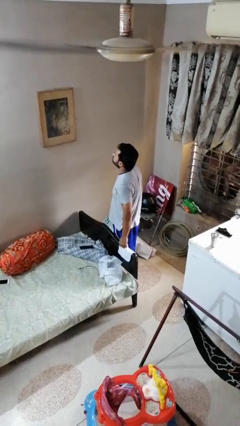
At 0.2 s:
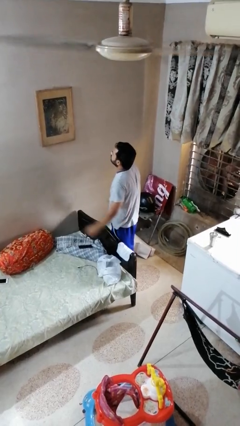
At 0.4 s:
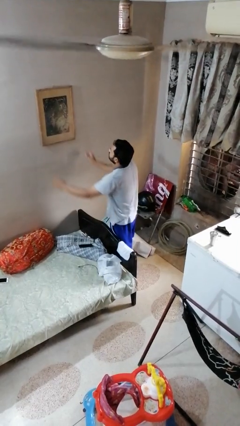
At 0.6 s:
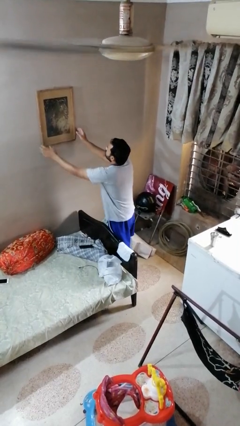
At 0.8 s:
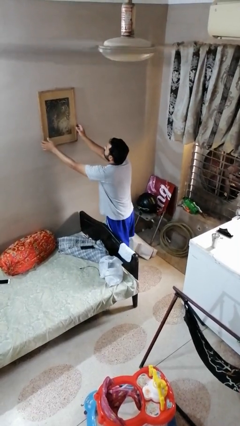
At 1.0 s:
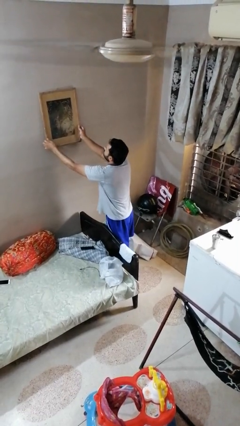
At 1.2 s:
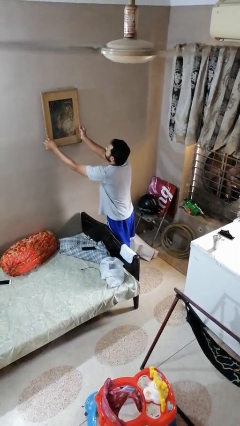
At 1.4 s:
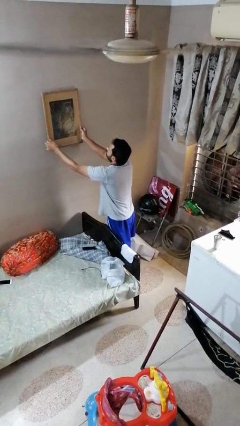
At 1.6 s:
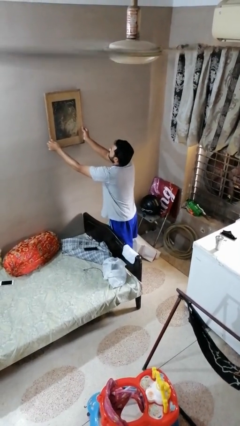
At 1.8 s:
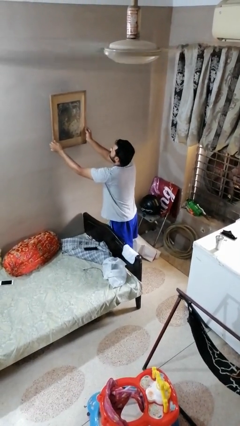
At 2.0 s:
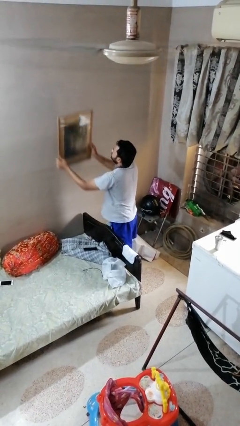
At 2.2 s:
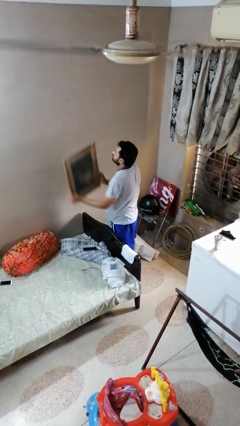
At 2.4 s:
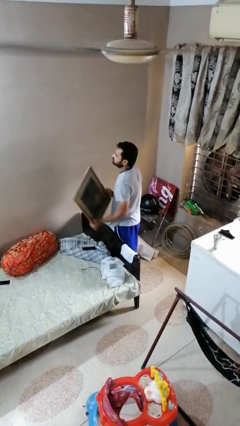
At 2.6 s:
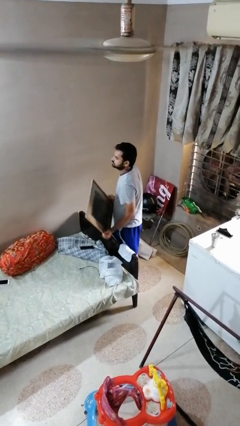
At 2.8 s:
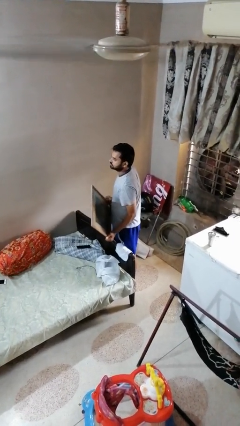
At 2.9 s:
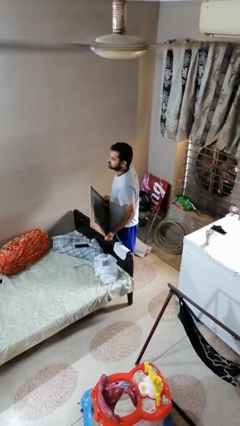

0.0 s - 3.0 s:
person takes down picture frame

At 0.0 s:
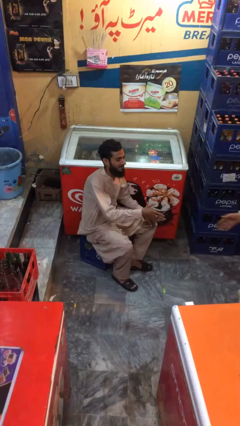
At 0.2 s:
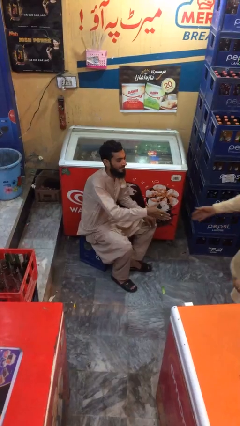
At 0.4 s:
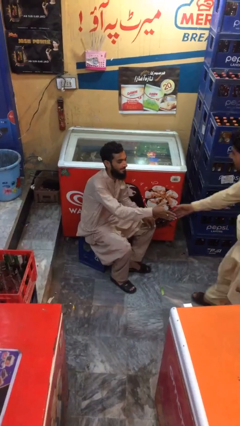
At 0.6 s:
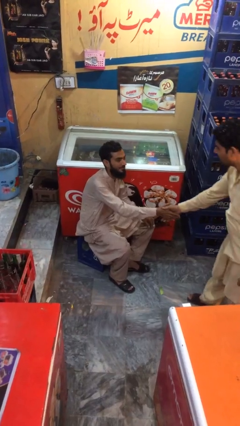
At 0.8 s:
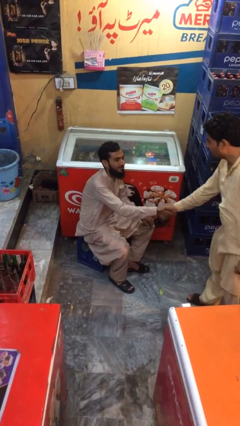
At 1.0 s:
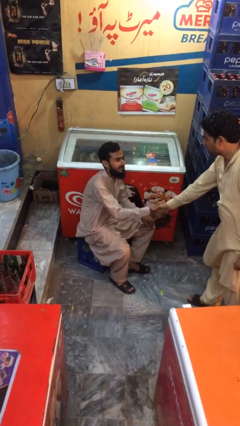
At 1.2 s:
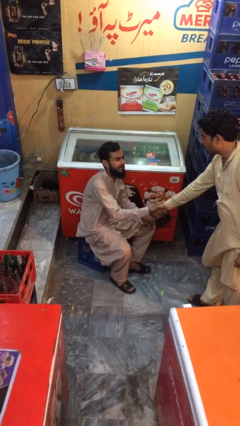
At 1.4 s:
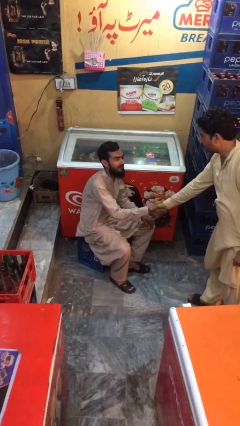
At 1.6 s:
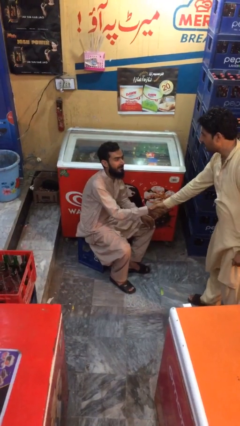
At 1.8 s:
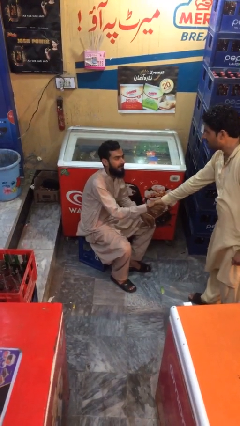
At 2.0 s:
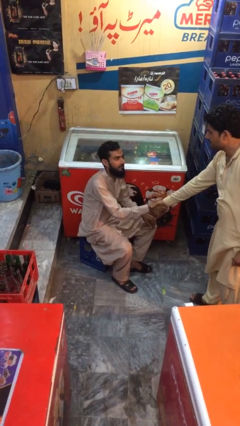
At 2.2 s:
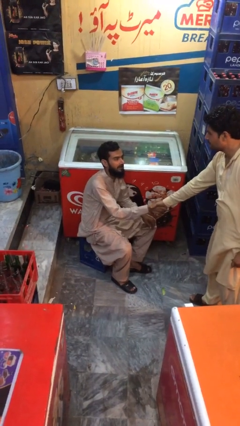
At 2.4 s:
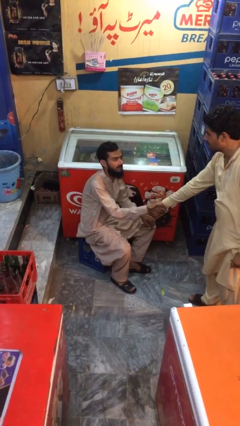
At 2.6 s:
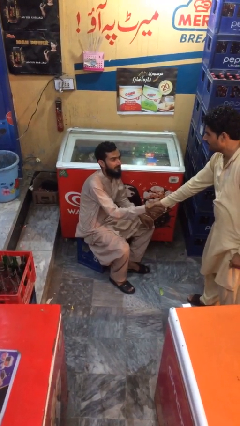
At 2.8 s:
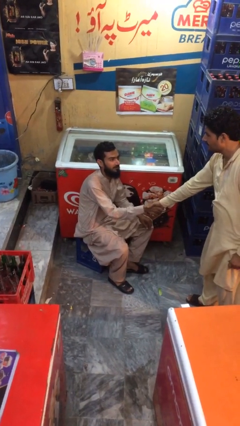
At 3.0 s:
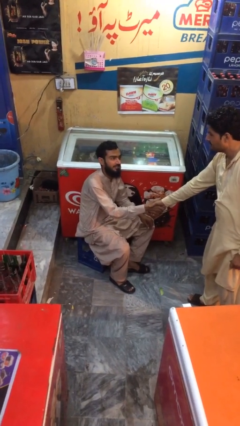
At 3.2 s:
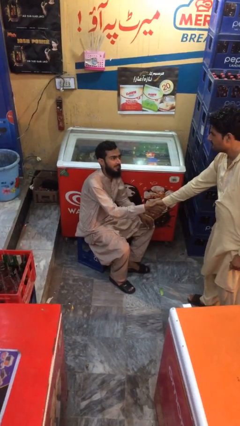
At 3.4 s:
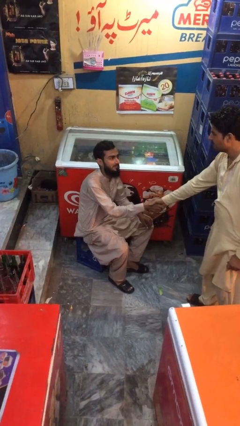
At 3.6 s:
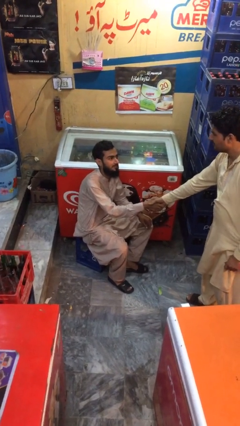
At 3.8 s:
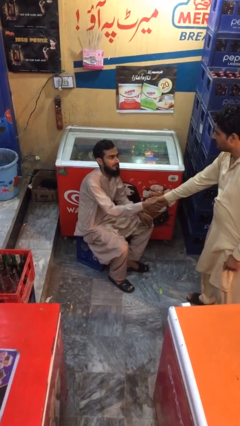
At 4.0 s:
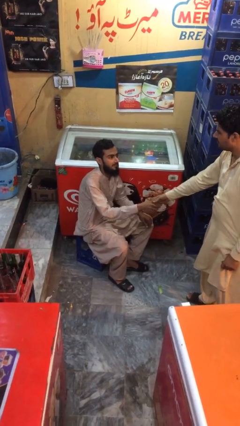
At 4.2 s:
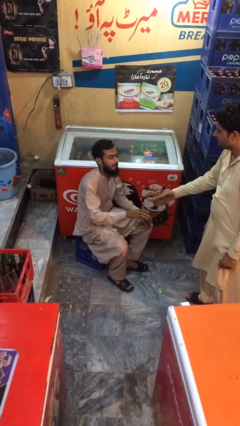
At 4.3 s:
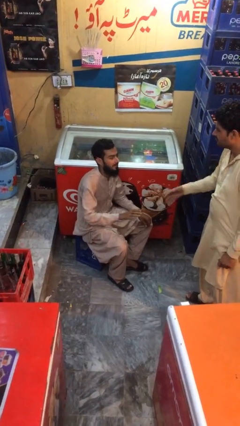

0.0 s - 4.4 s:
person shakes hand

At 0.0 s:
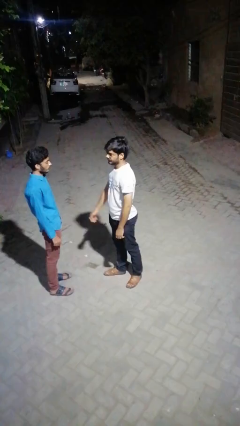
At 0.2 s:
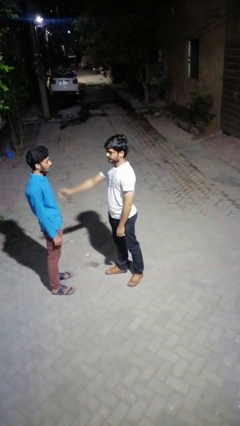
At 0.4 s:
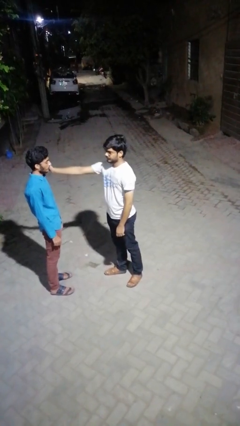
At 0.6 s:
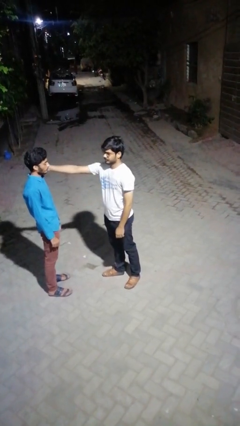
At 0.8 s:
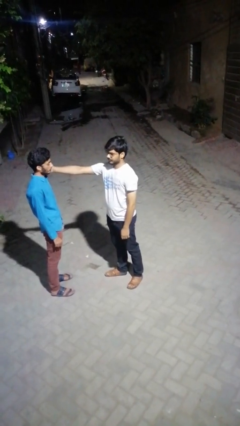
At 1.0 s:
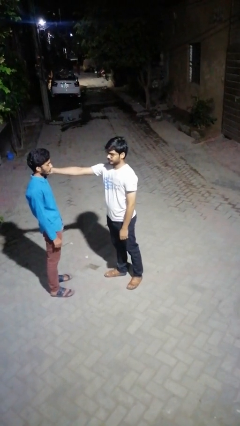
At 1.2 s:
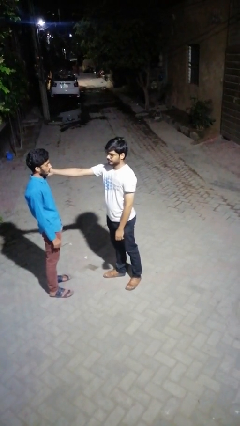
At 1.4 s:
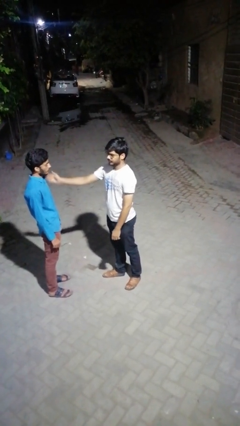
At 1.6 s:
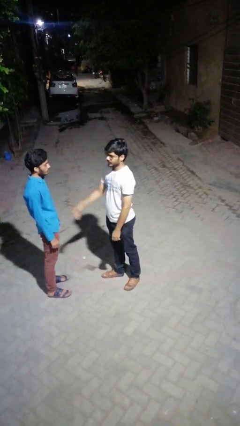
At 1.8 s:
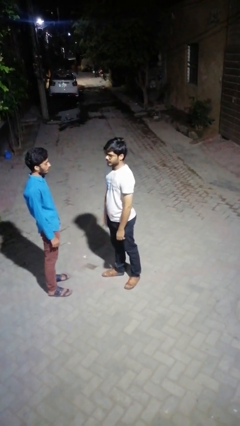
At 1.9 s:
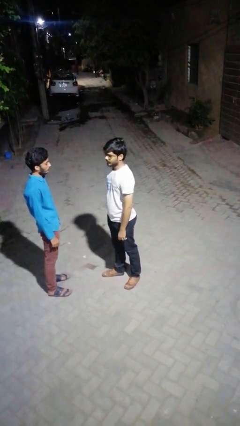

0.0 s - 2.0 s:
person touches face of person

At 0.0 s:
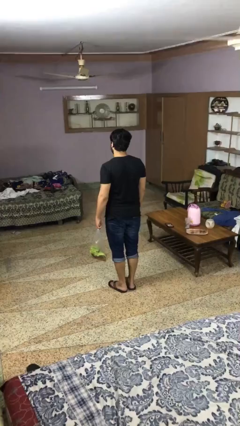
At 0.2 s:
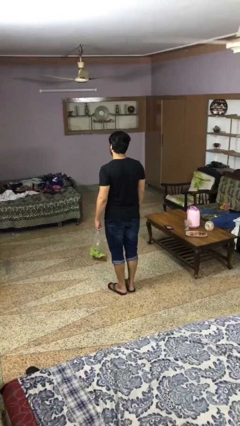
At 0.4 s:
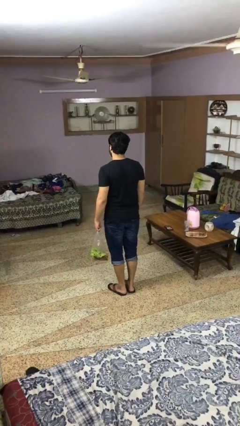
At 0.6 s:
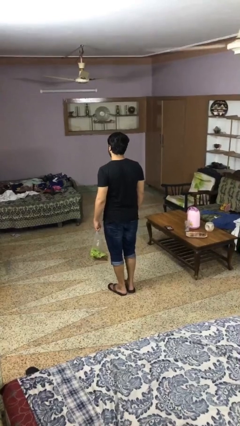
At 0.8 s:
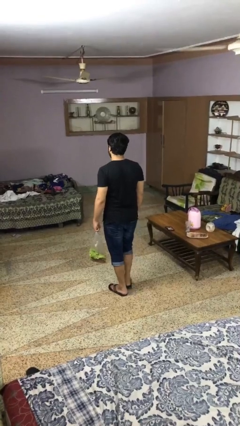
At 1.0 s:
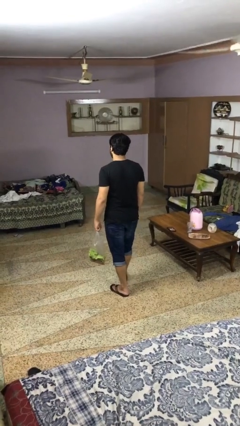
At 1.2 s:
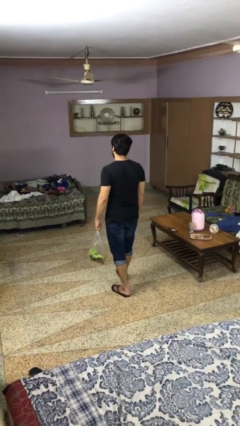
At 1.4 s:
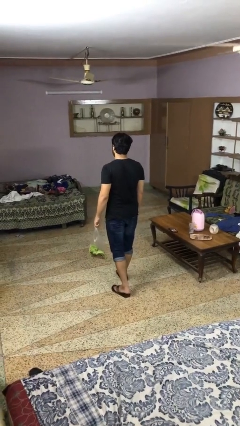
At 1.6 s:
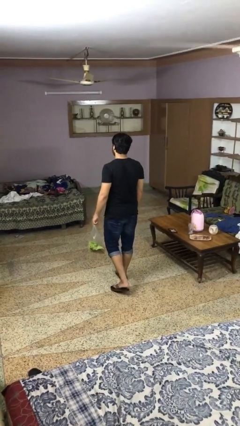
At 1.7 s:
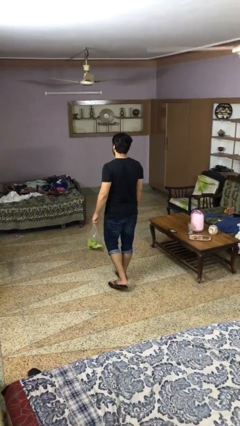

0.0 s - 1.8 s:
person carries groceries

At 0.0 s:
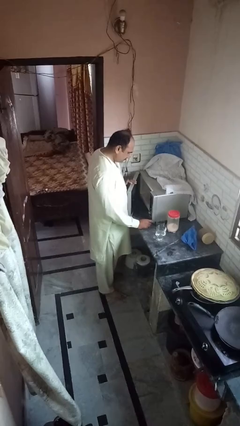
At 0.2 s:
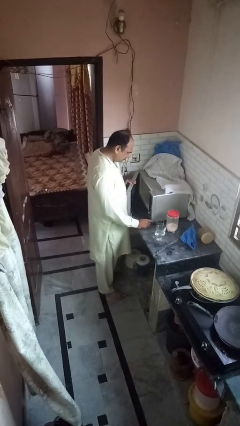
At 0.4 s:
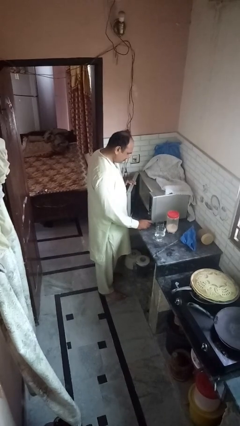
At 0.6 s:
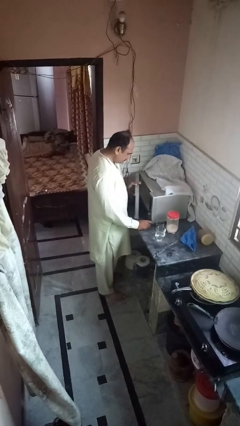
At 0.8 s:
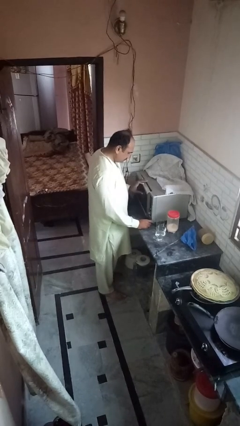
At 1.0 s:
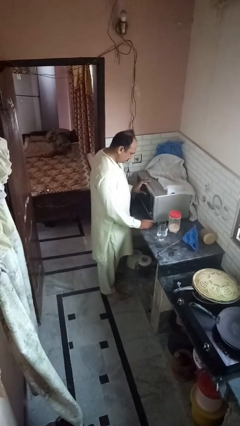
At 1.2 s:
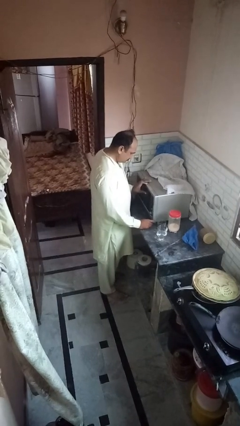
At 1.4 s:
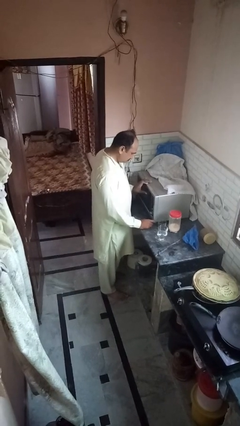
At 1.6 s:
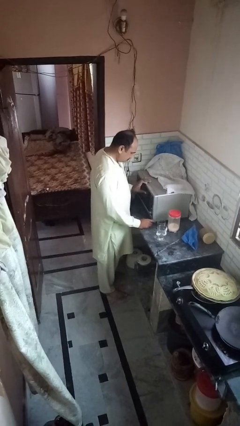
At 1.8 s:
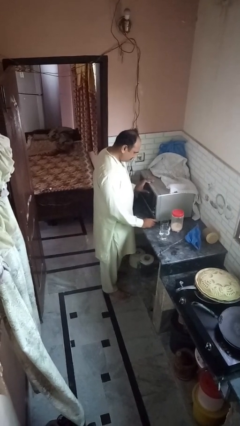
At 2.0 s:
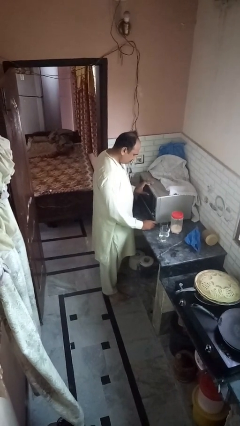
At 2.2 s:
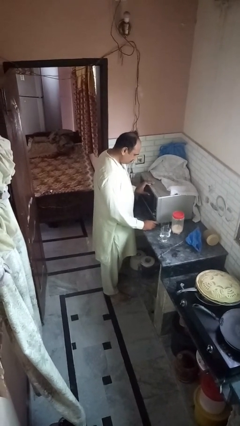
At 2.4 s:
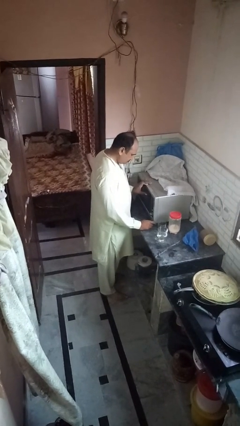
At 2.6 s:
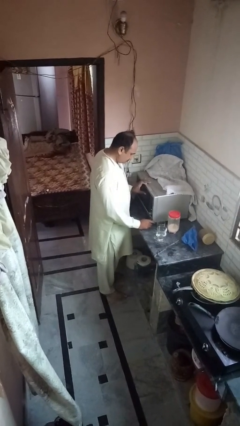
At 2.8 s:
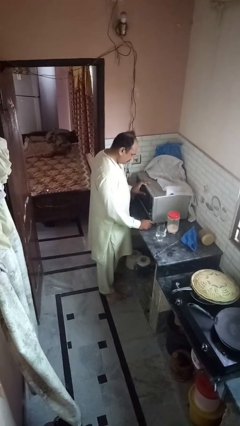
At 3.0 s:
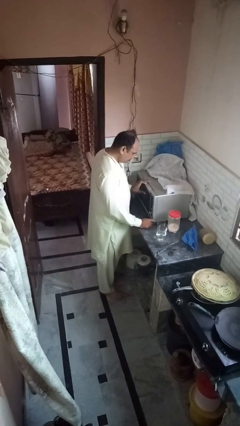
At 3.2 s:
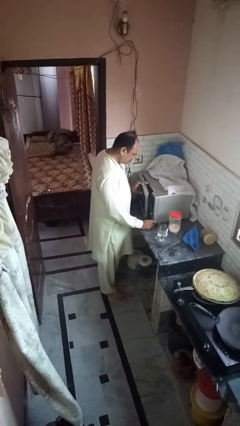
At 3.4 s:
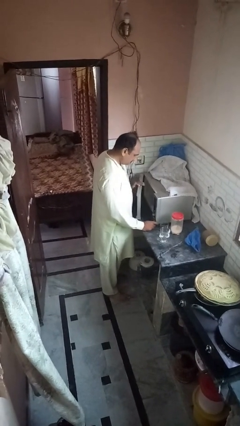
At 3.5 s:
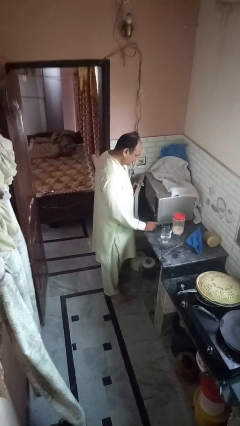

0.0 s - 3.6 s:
person closes microwave

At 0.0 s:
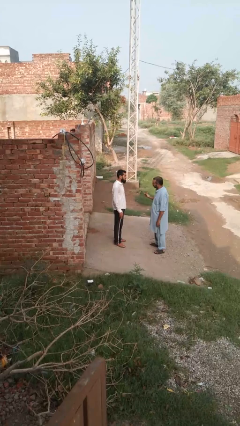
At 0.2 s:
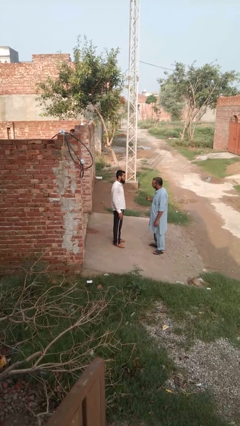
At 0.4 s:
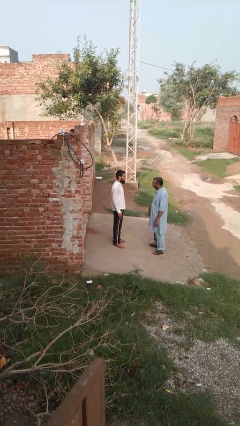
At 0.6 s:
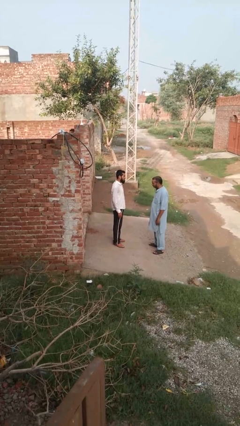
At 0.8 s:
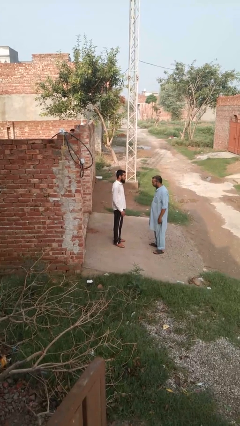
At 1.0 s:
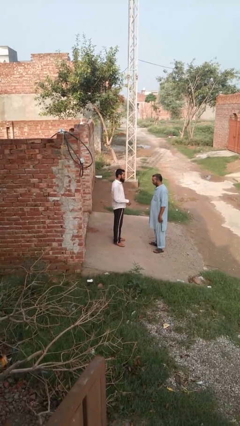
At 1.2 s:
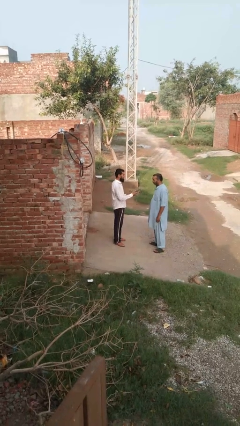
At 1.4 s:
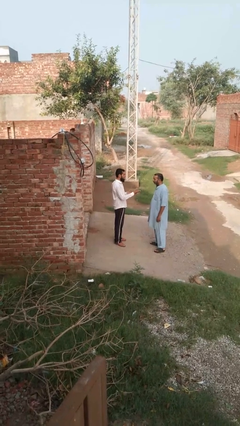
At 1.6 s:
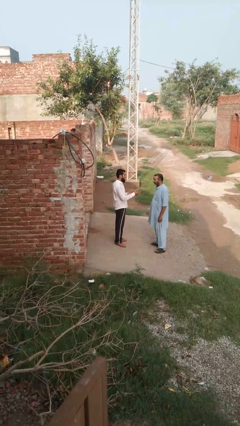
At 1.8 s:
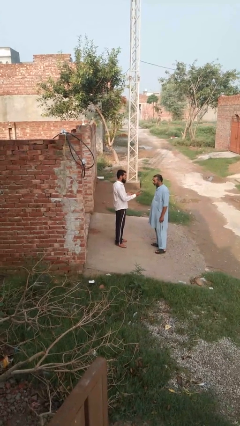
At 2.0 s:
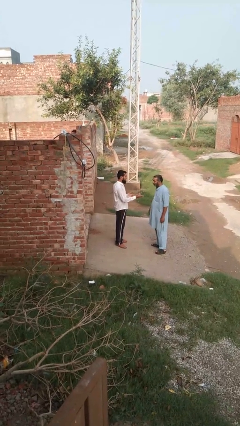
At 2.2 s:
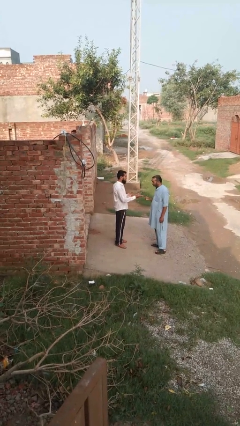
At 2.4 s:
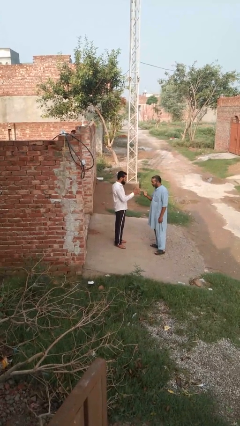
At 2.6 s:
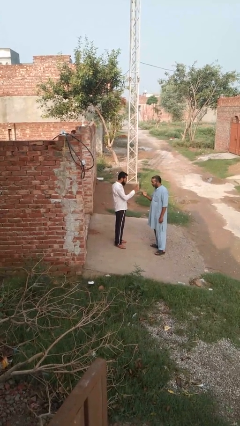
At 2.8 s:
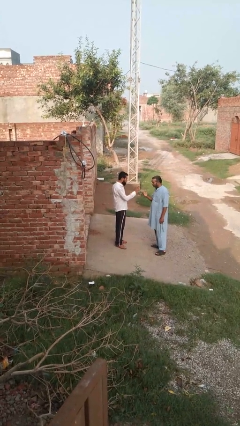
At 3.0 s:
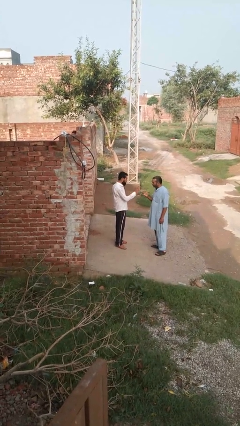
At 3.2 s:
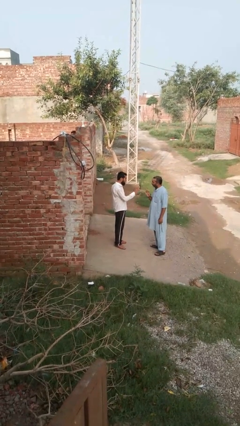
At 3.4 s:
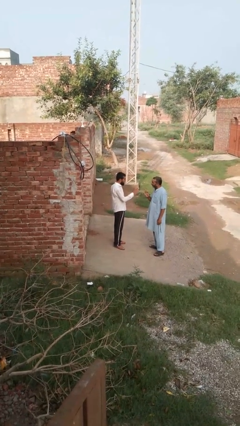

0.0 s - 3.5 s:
person talks to person
